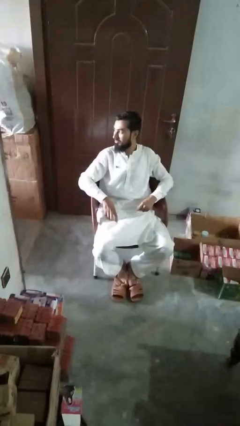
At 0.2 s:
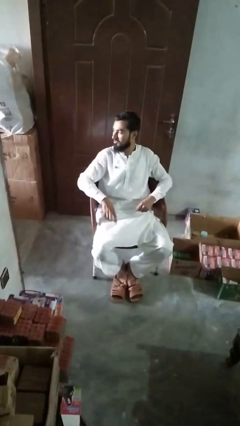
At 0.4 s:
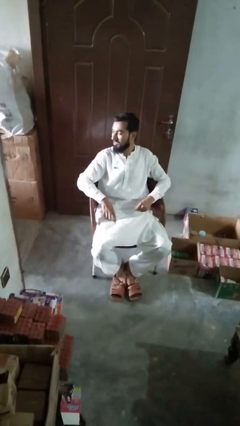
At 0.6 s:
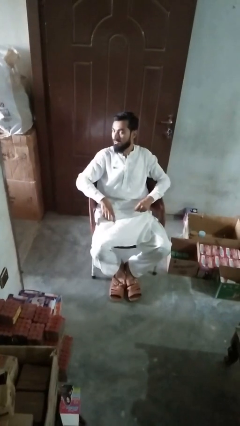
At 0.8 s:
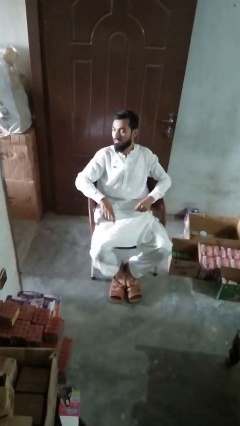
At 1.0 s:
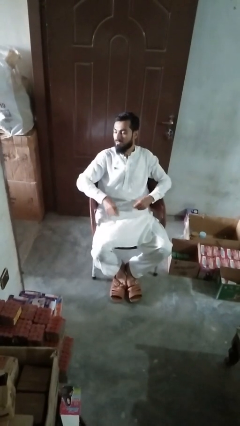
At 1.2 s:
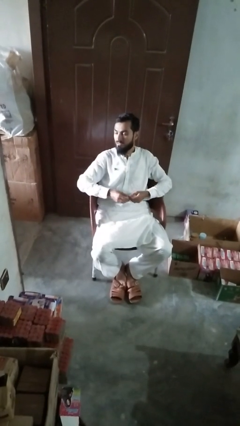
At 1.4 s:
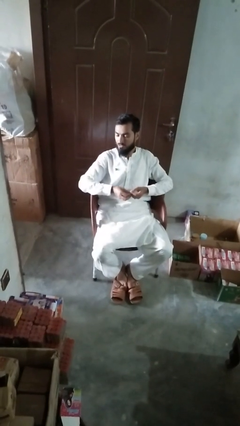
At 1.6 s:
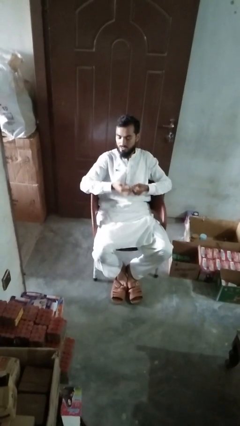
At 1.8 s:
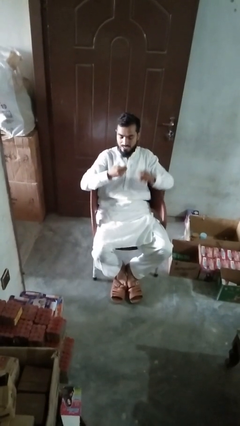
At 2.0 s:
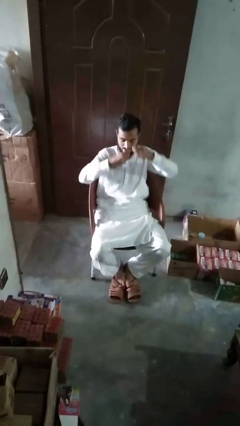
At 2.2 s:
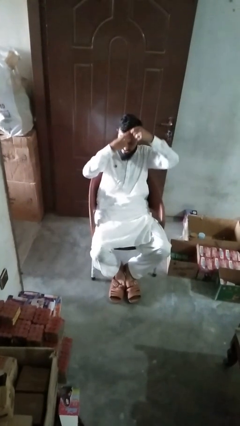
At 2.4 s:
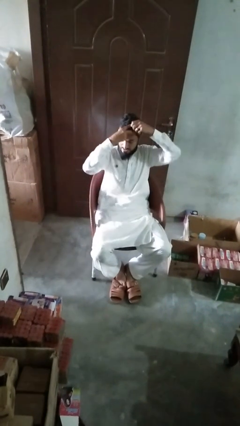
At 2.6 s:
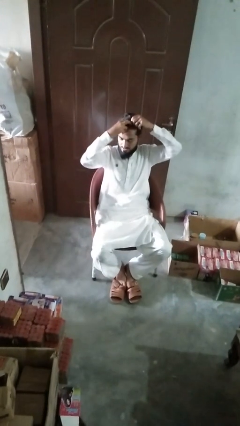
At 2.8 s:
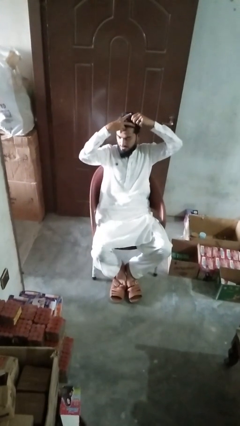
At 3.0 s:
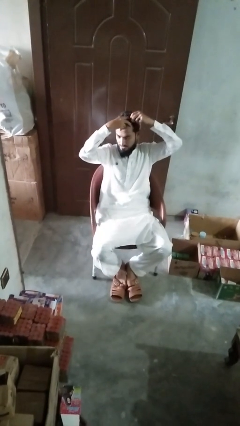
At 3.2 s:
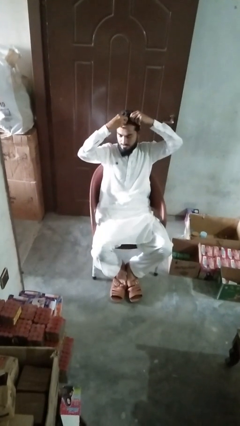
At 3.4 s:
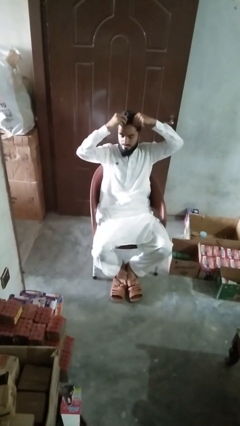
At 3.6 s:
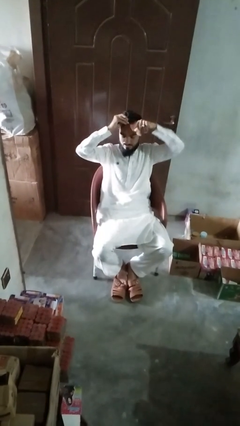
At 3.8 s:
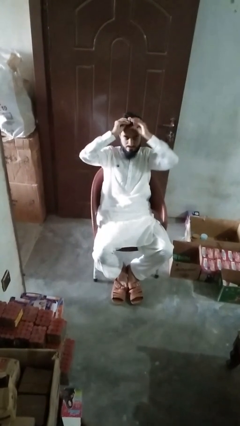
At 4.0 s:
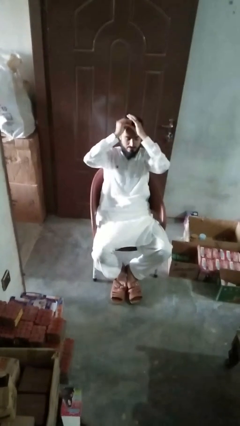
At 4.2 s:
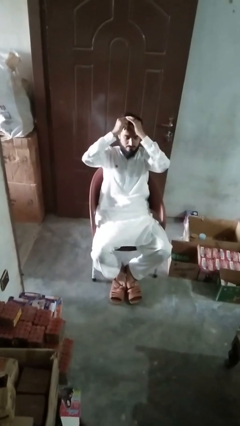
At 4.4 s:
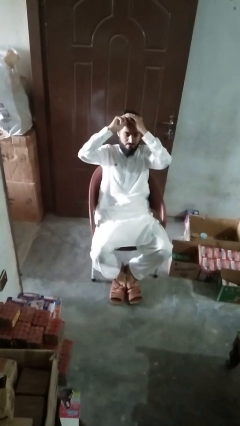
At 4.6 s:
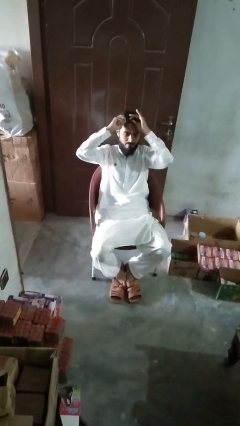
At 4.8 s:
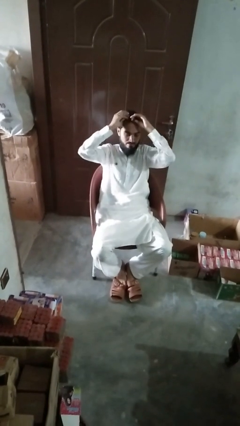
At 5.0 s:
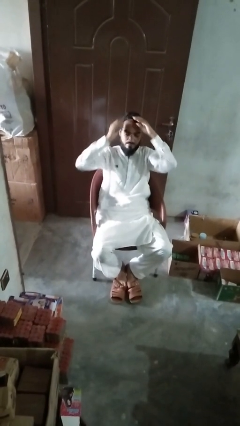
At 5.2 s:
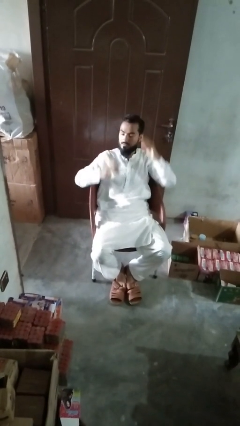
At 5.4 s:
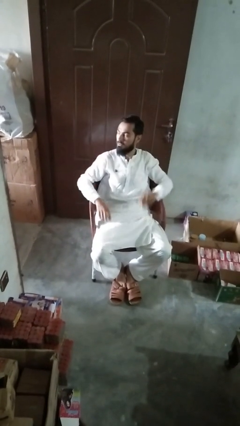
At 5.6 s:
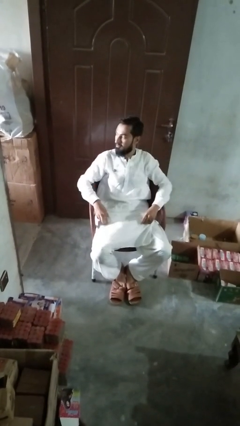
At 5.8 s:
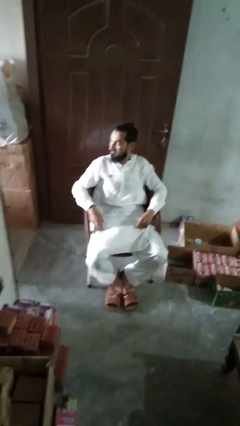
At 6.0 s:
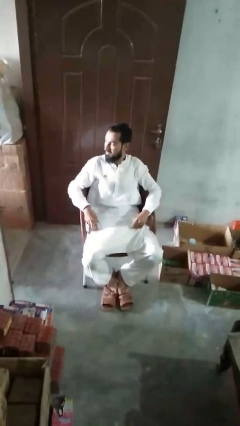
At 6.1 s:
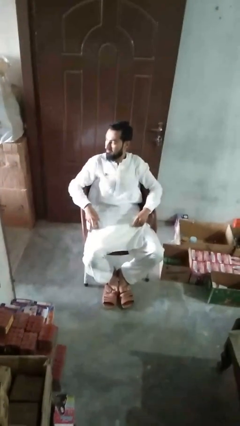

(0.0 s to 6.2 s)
person puts hair in ponytail

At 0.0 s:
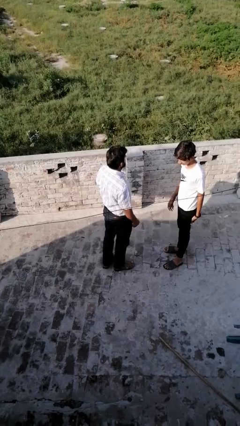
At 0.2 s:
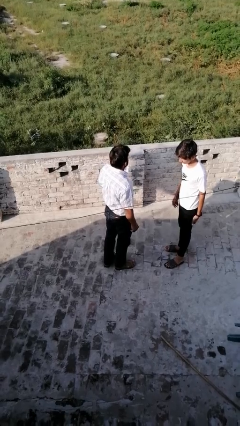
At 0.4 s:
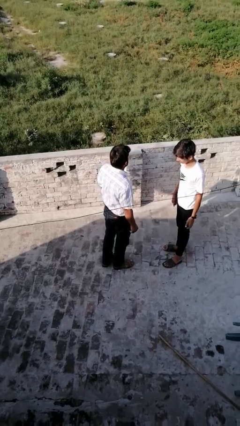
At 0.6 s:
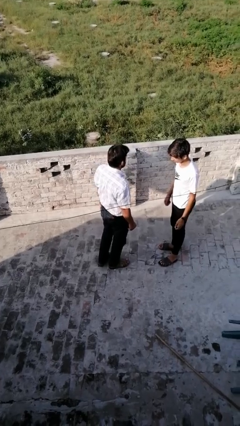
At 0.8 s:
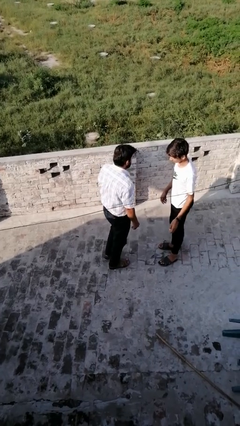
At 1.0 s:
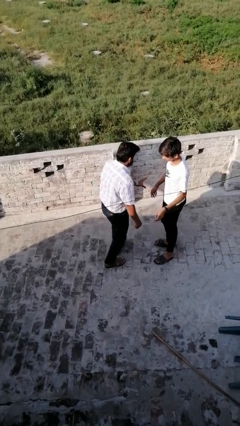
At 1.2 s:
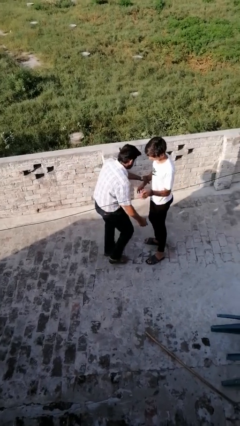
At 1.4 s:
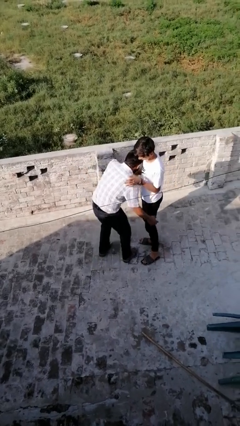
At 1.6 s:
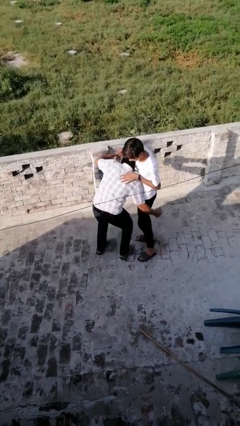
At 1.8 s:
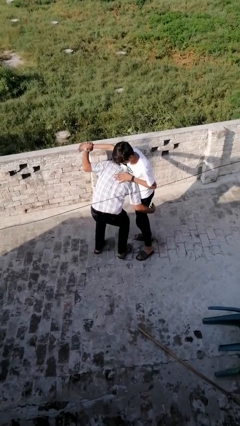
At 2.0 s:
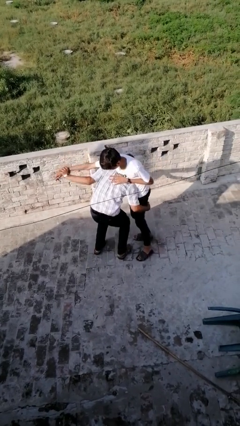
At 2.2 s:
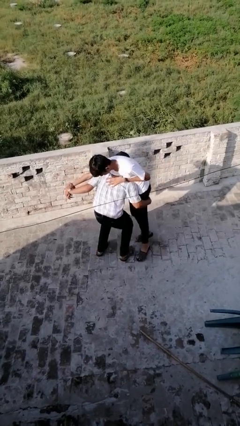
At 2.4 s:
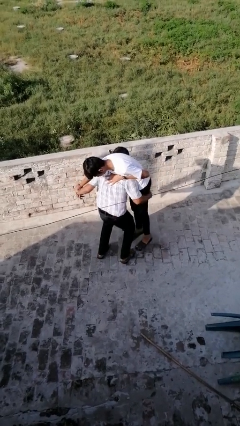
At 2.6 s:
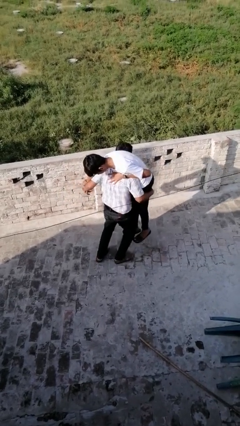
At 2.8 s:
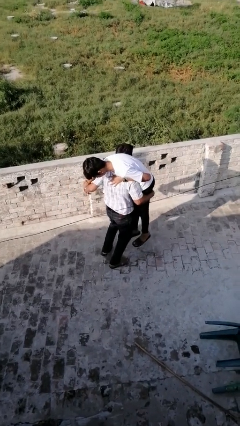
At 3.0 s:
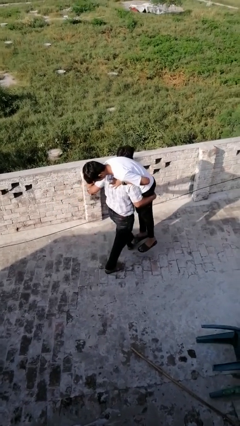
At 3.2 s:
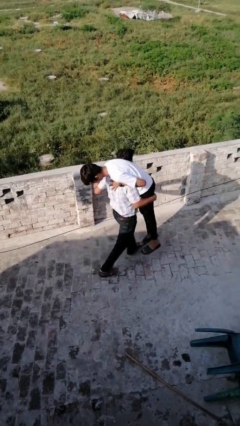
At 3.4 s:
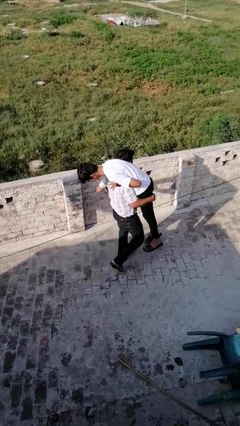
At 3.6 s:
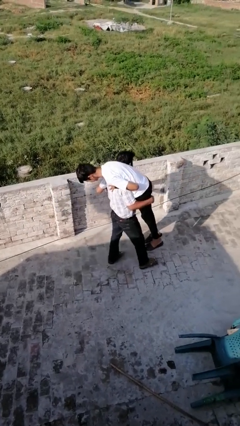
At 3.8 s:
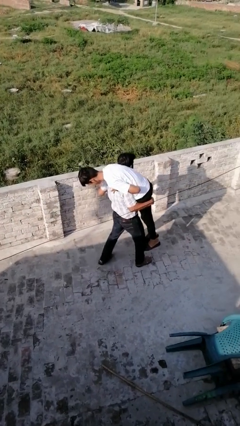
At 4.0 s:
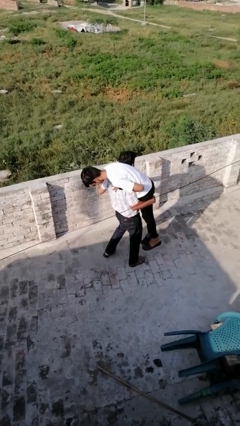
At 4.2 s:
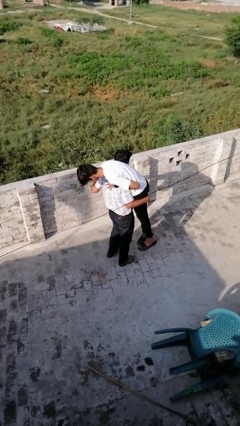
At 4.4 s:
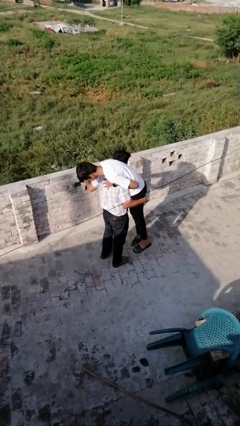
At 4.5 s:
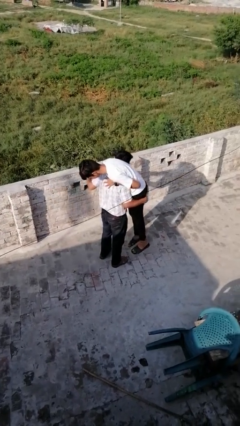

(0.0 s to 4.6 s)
person carries person on shoulders

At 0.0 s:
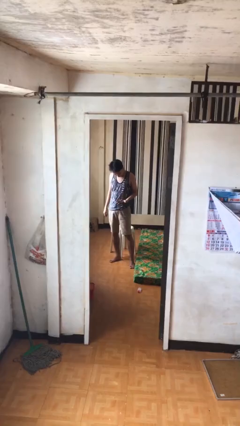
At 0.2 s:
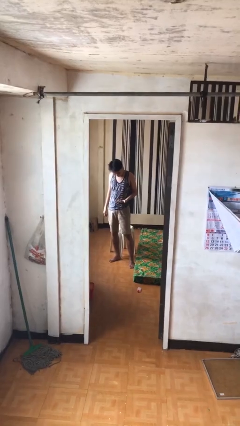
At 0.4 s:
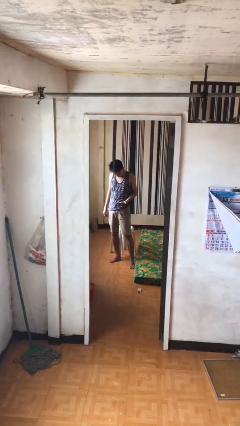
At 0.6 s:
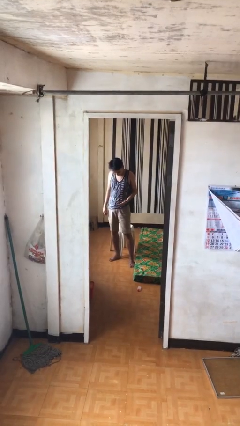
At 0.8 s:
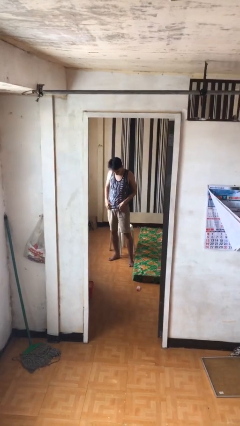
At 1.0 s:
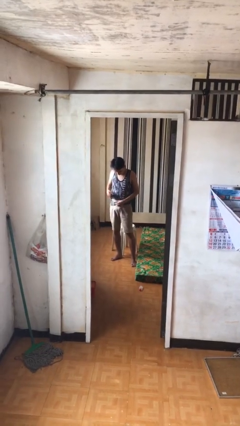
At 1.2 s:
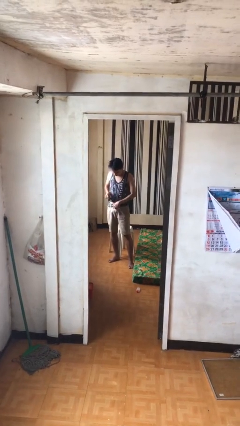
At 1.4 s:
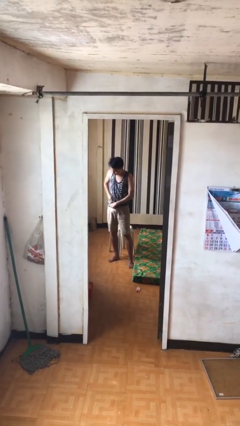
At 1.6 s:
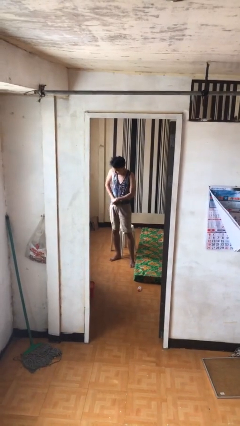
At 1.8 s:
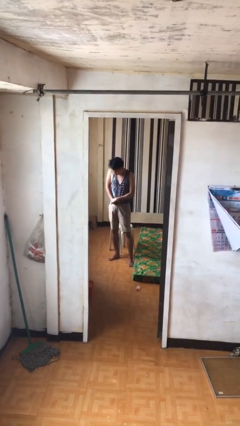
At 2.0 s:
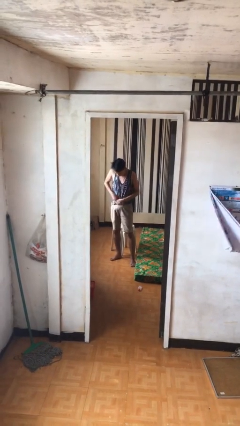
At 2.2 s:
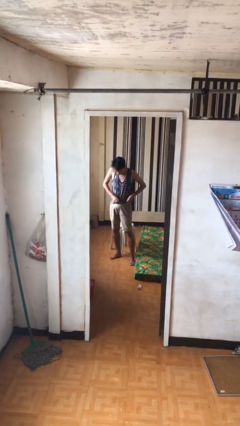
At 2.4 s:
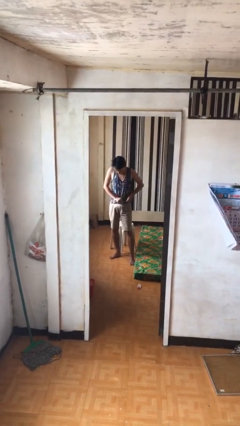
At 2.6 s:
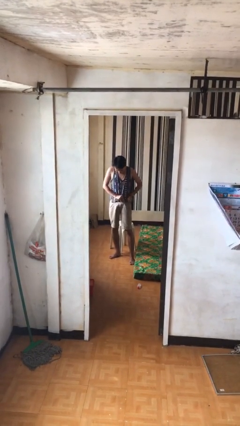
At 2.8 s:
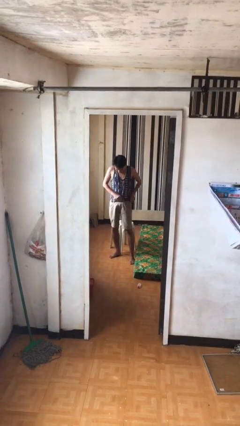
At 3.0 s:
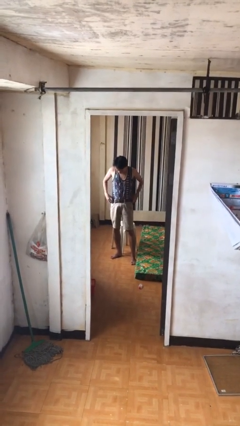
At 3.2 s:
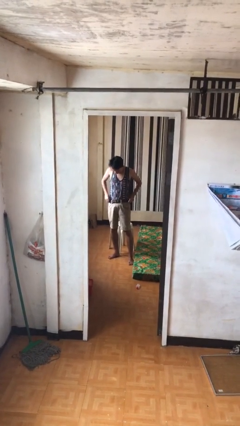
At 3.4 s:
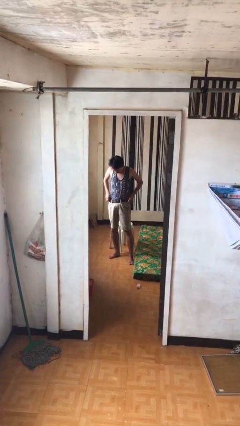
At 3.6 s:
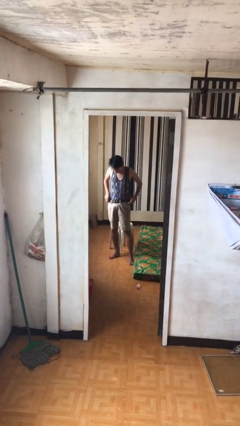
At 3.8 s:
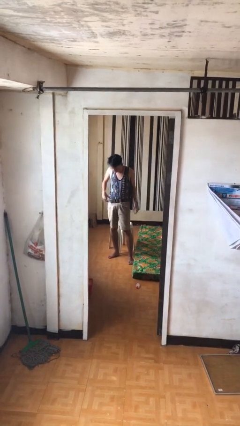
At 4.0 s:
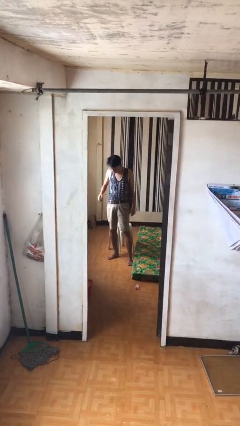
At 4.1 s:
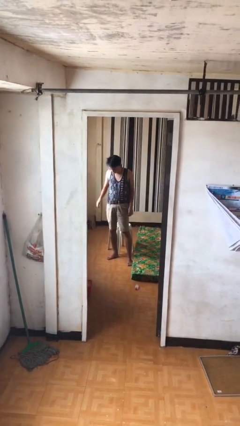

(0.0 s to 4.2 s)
person tucks in shirt

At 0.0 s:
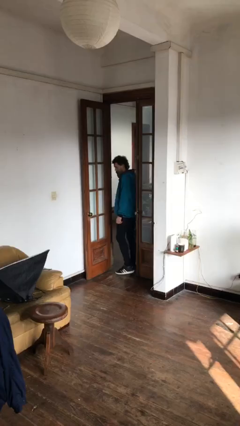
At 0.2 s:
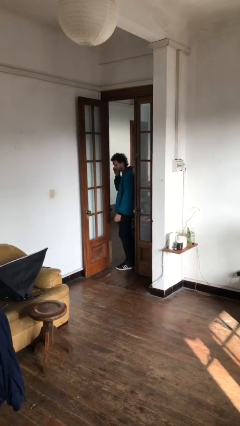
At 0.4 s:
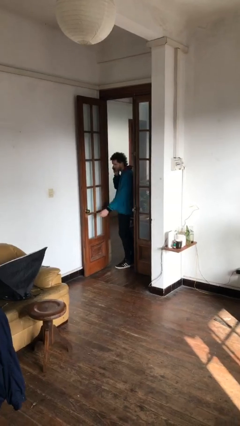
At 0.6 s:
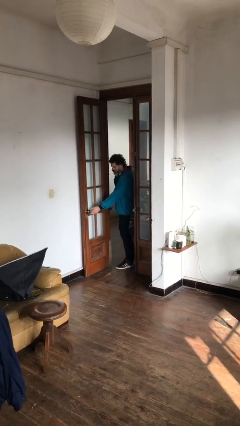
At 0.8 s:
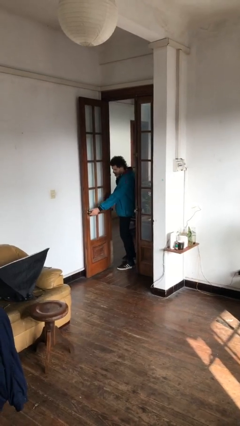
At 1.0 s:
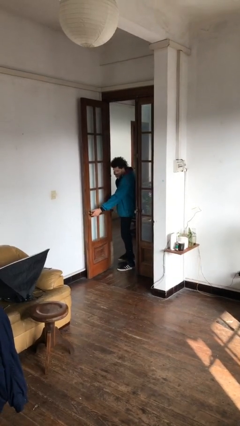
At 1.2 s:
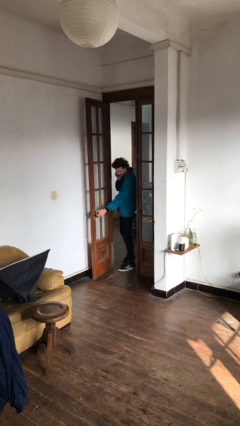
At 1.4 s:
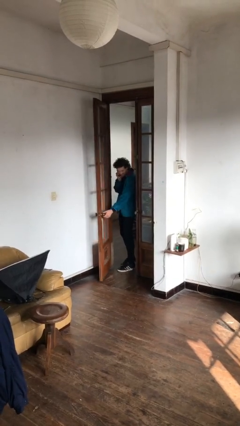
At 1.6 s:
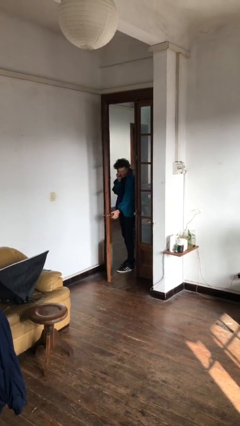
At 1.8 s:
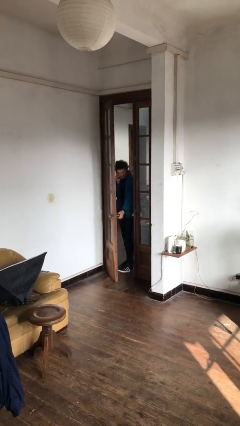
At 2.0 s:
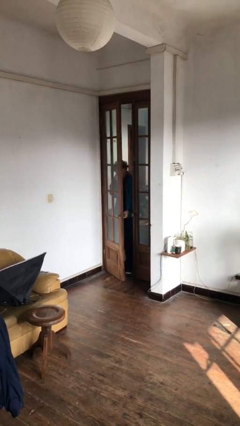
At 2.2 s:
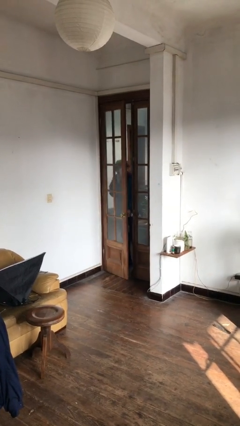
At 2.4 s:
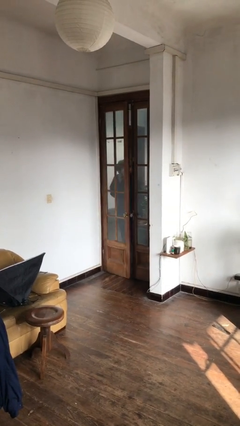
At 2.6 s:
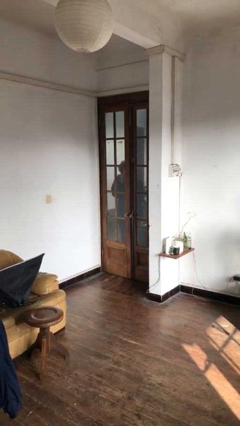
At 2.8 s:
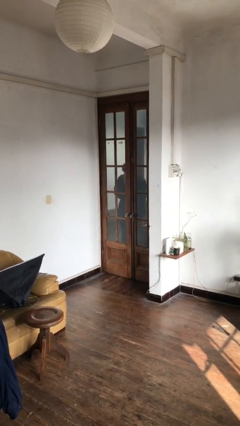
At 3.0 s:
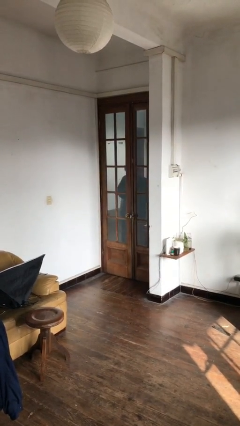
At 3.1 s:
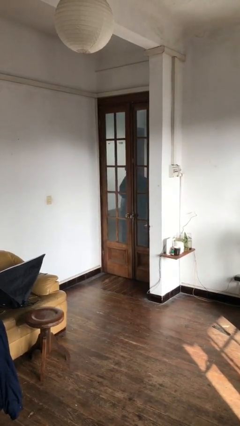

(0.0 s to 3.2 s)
person closes facility door
